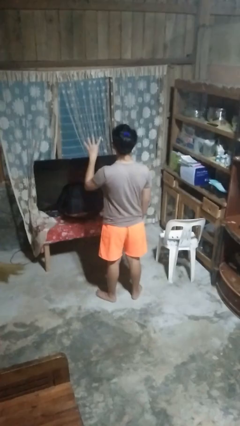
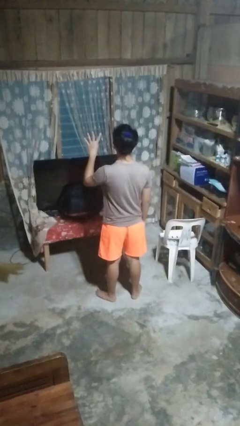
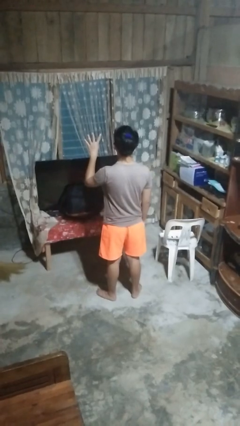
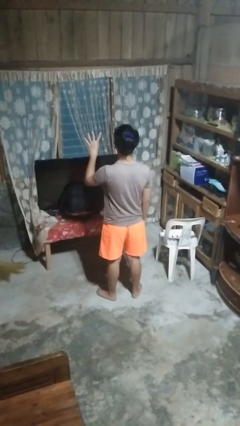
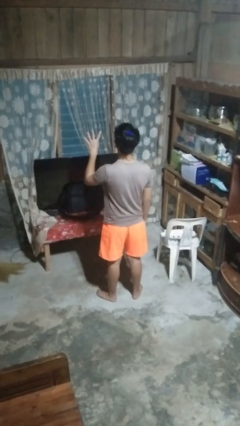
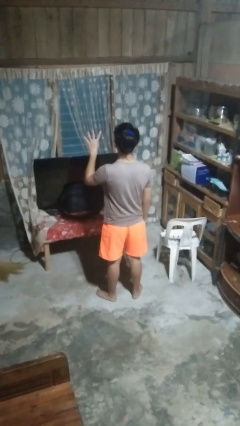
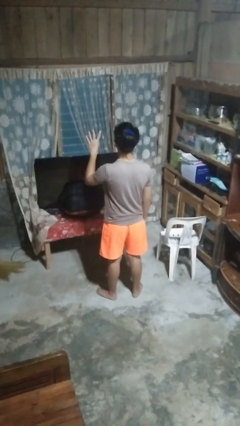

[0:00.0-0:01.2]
person gestures number four

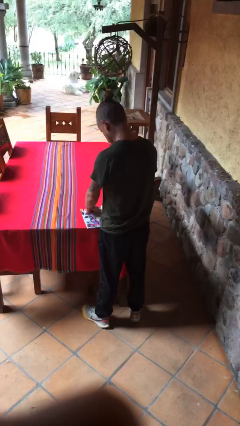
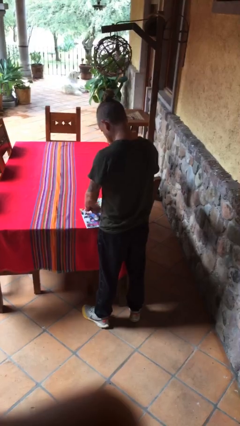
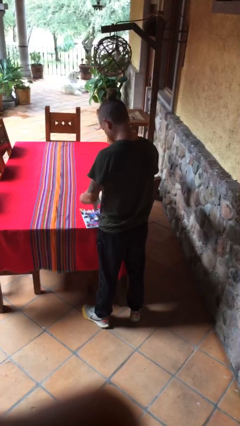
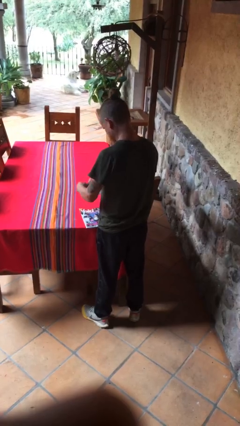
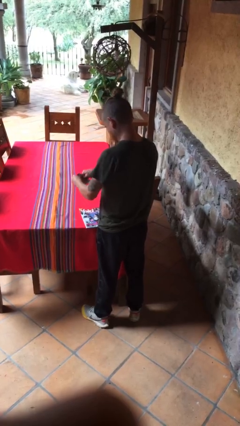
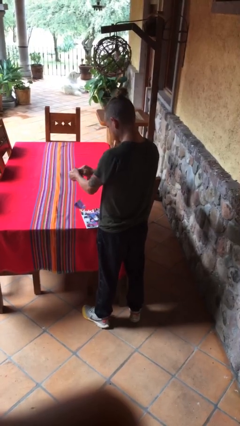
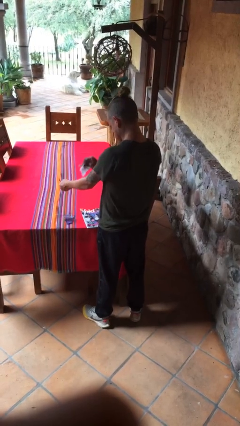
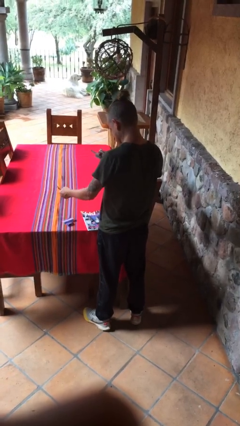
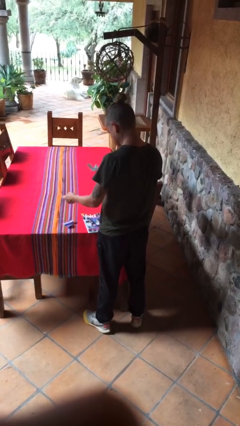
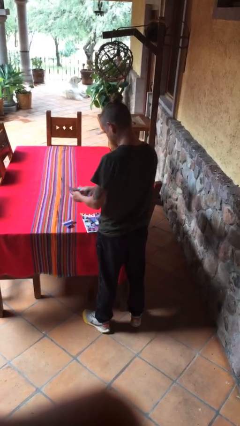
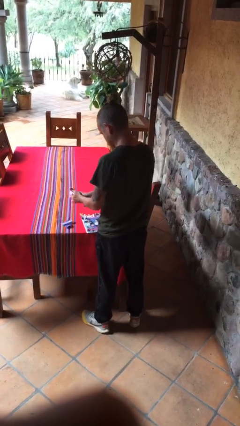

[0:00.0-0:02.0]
person tears paper

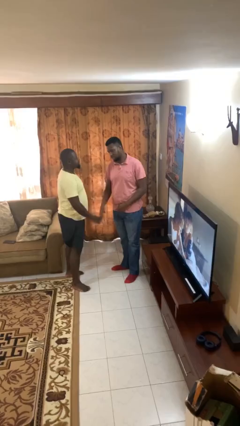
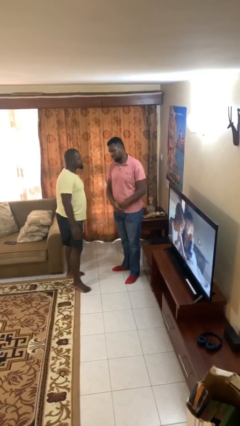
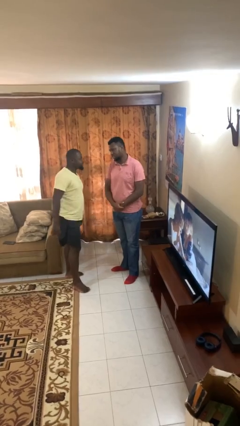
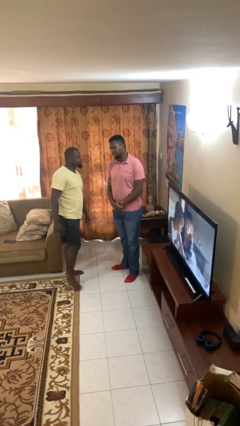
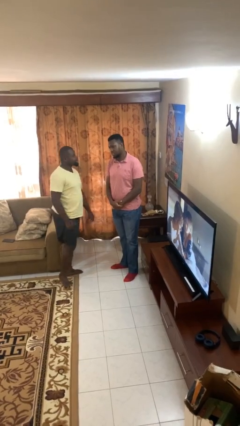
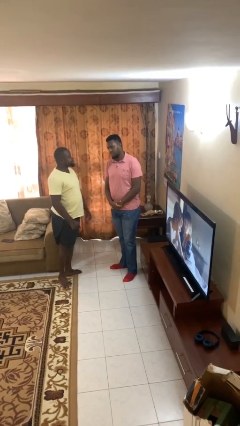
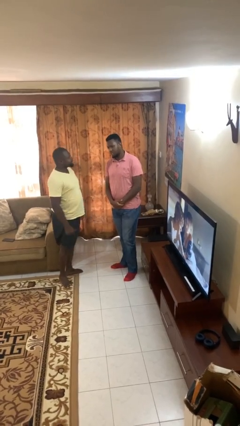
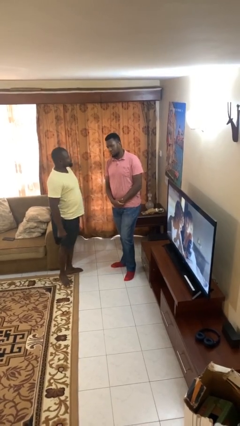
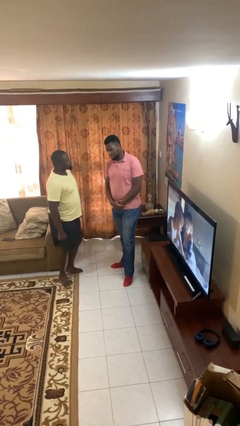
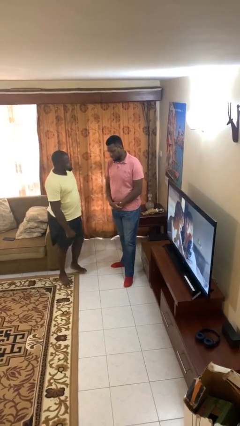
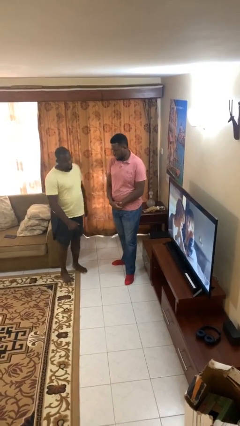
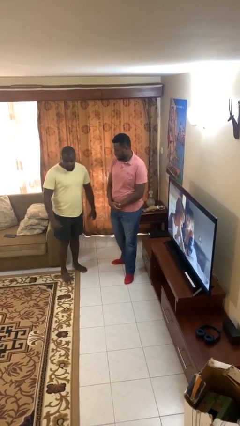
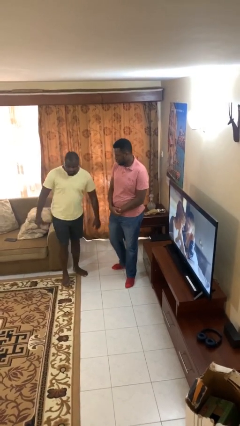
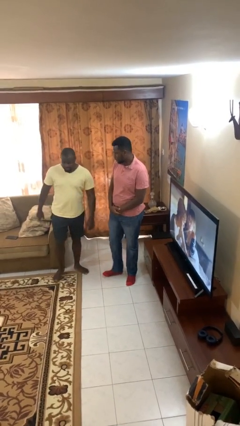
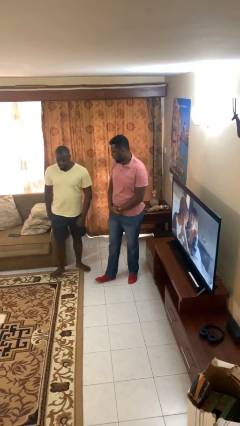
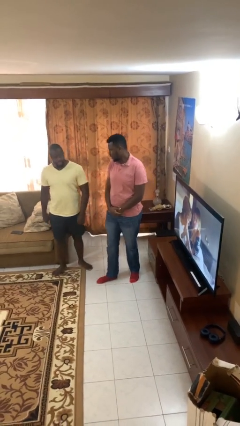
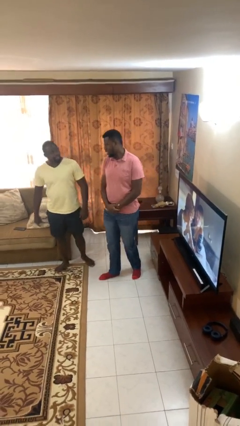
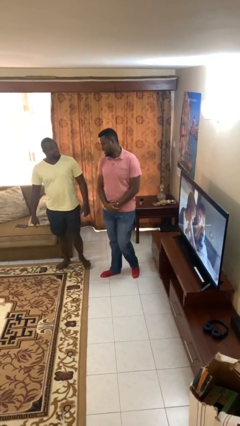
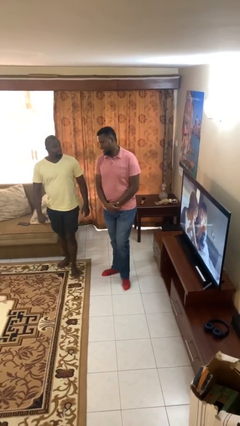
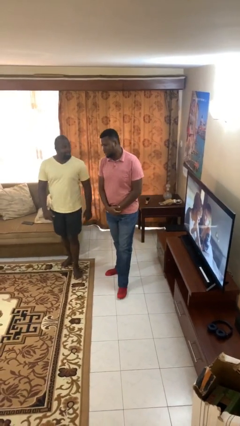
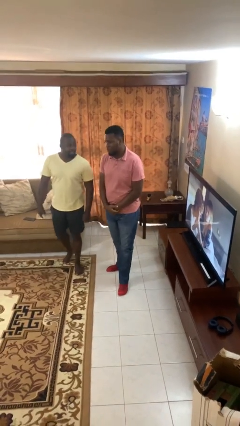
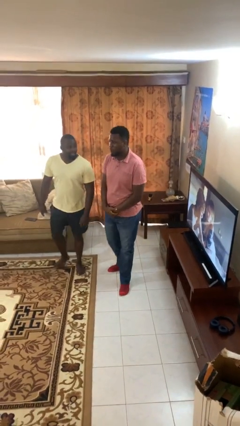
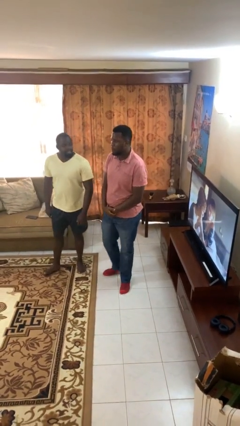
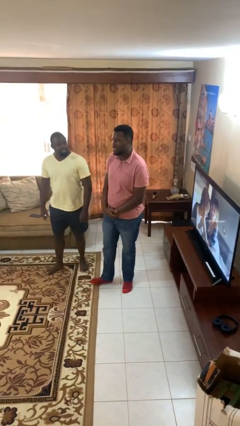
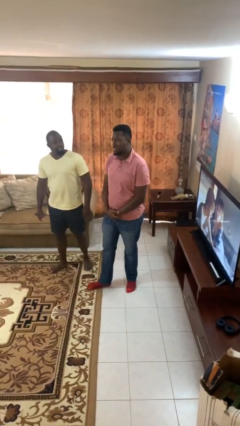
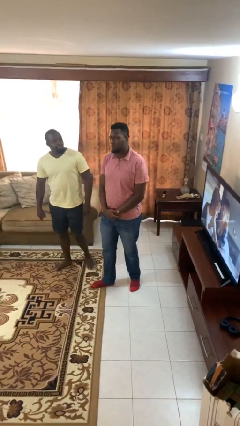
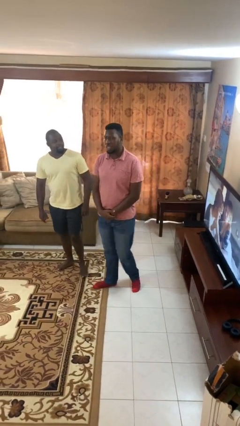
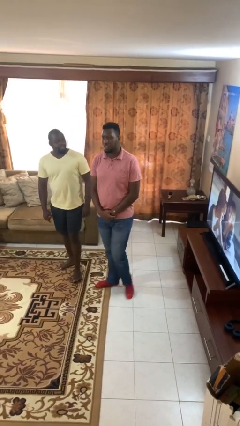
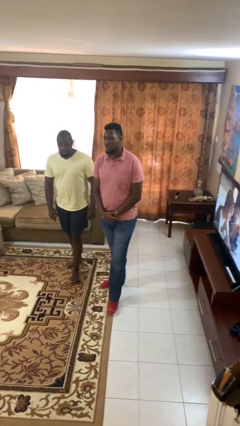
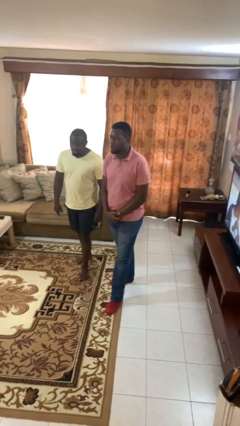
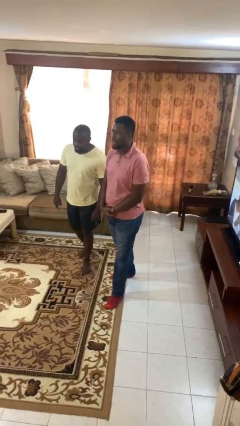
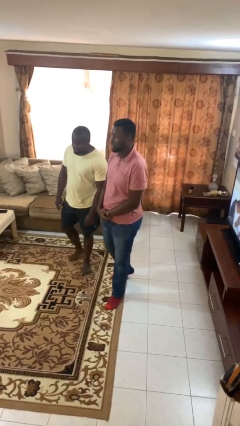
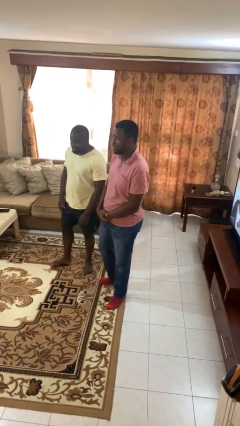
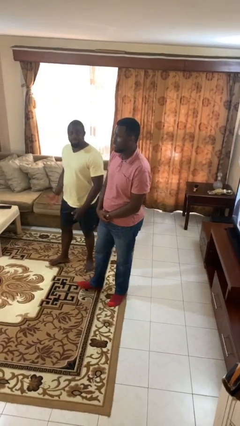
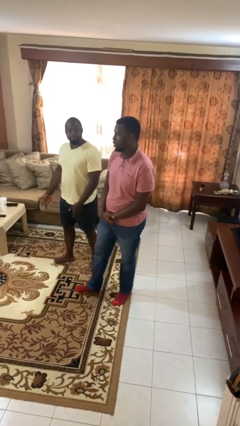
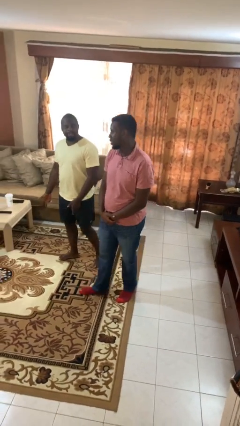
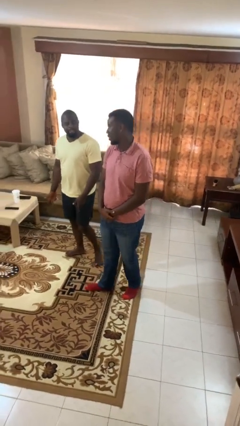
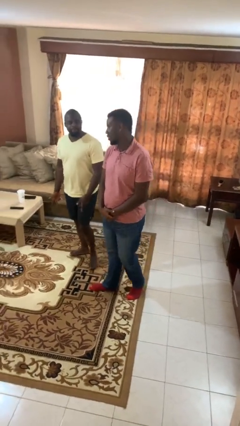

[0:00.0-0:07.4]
person talks to person

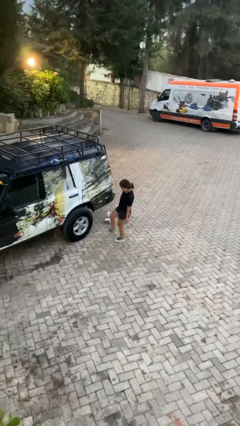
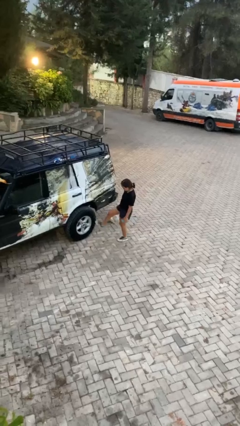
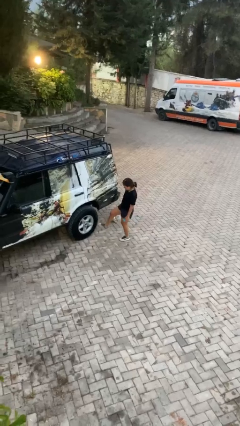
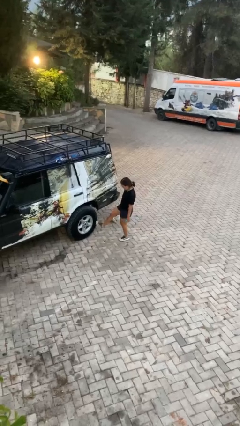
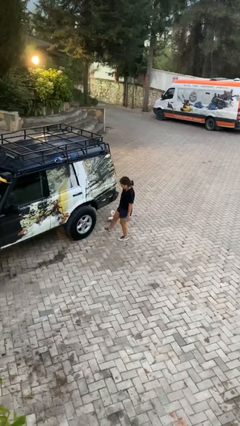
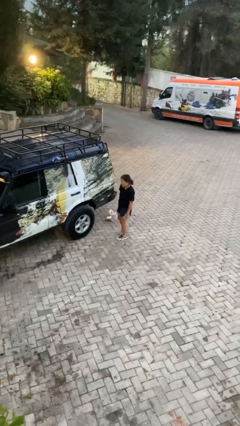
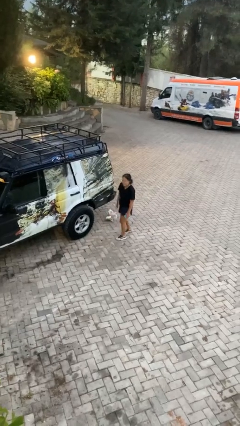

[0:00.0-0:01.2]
person kicks car tires

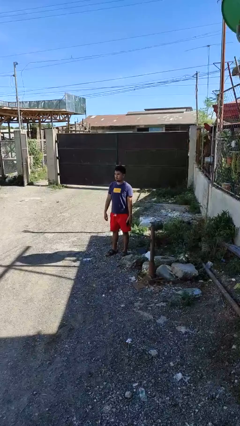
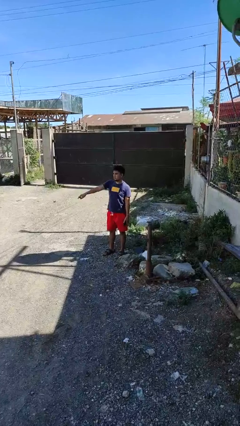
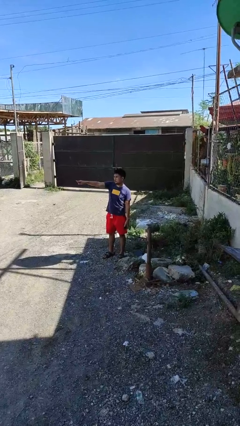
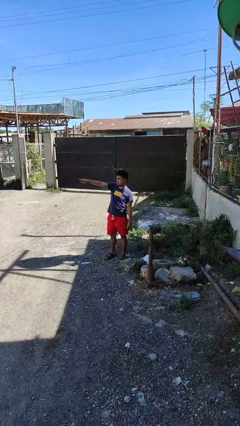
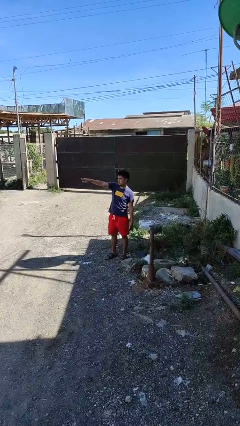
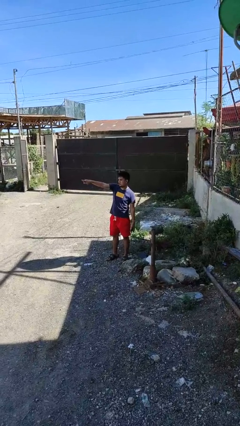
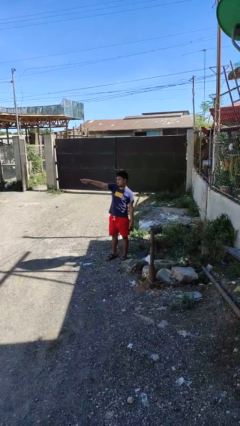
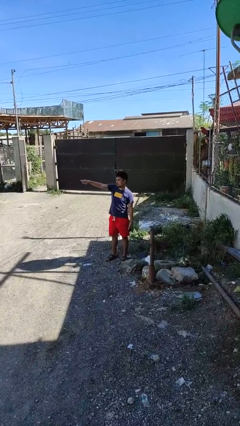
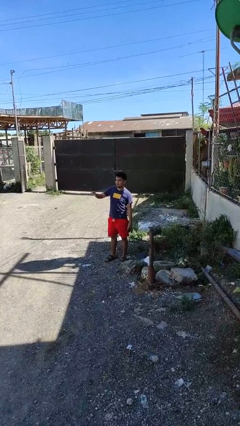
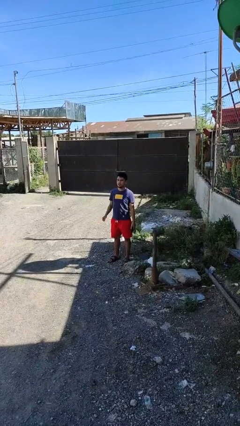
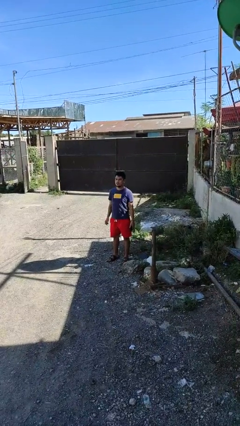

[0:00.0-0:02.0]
person points at person

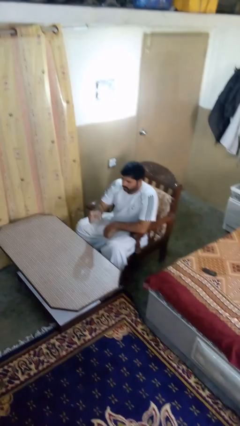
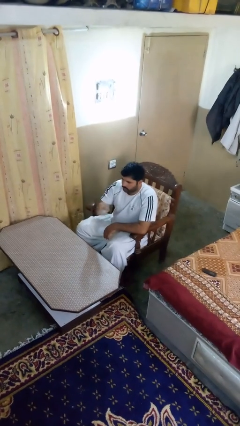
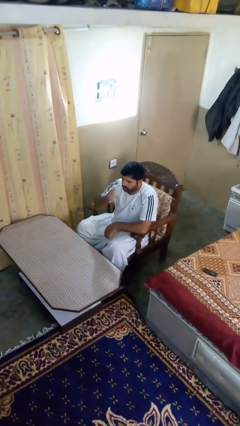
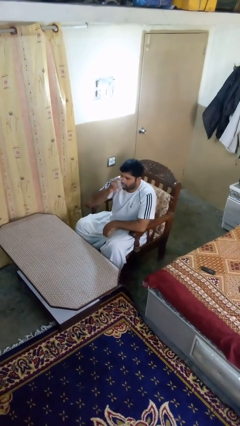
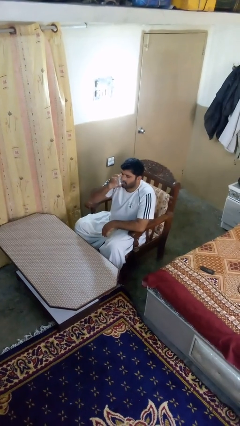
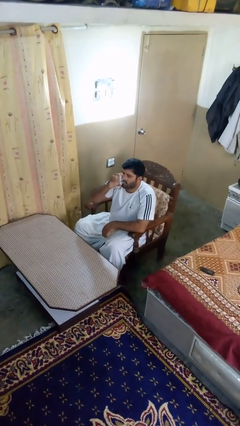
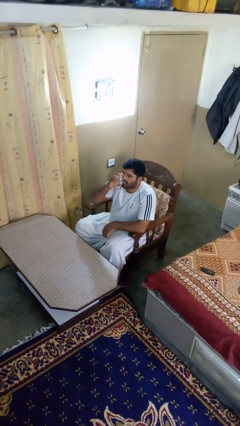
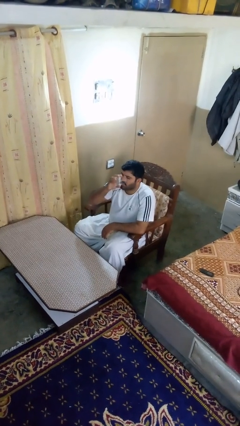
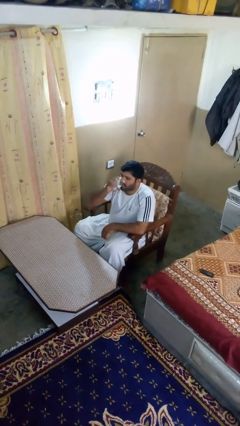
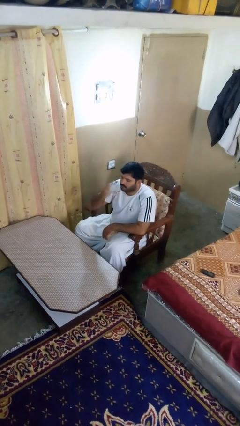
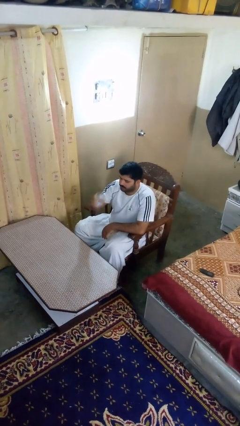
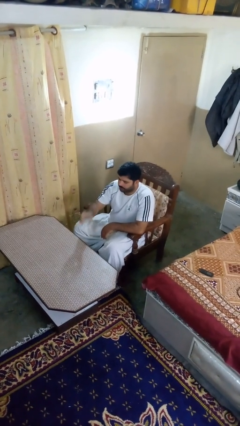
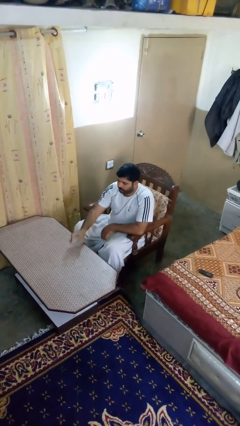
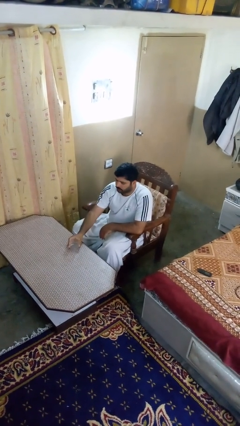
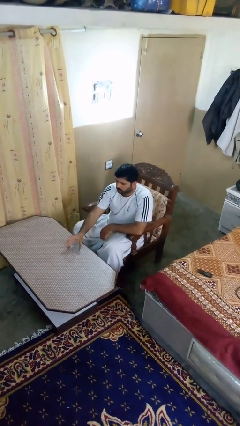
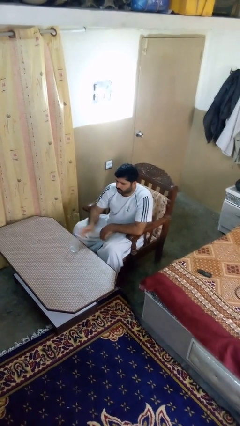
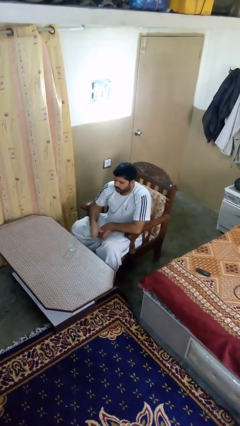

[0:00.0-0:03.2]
person drinks from shotglass

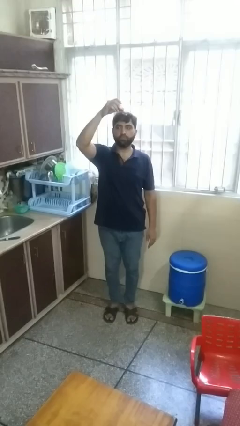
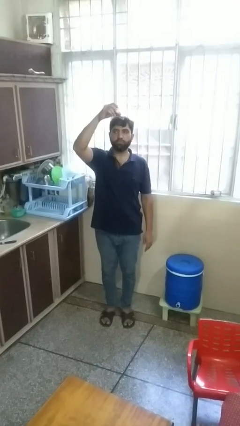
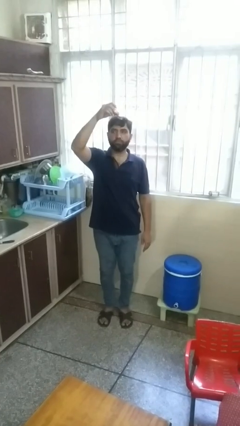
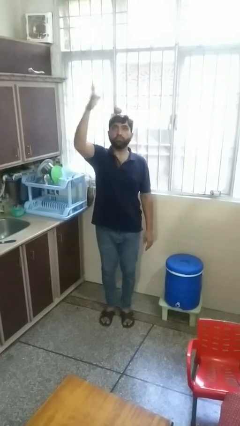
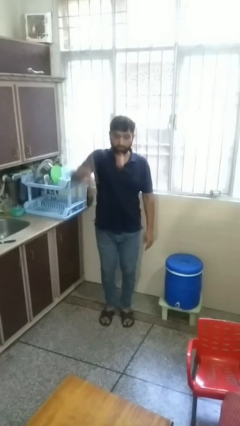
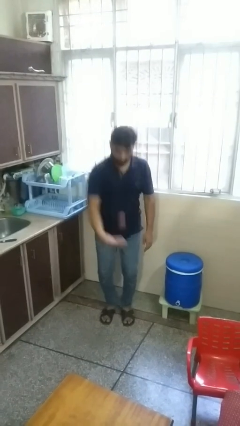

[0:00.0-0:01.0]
person drops object
